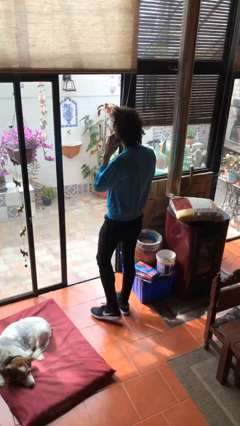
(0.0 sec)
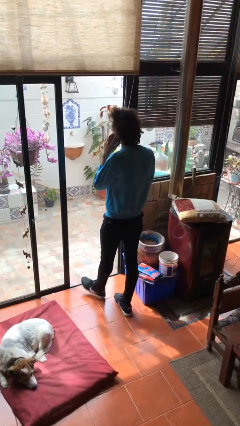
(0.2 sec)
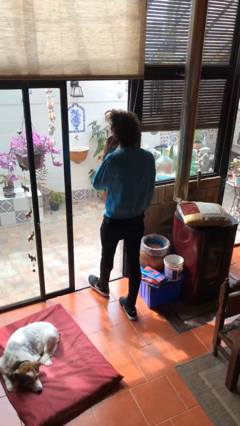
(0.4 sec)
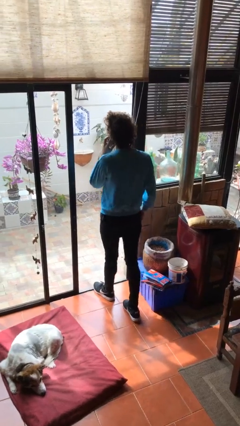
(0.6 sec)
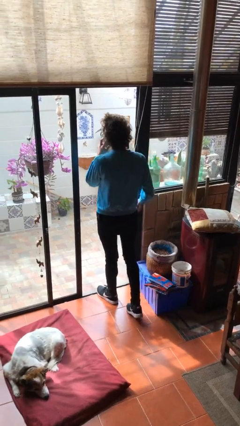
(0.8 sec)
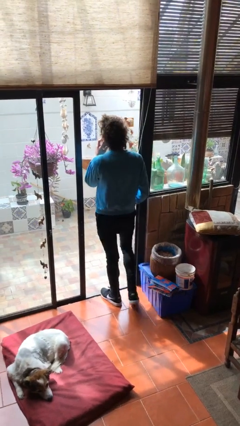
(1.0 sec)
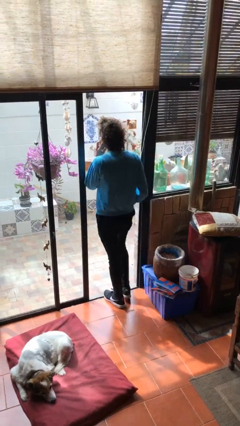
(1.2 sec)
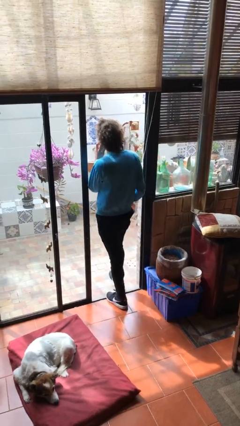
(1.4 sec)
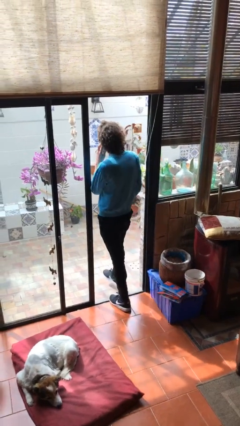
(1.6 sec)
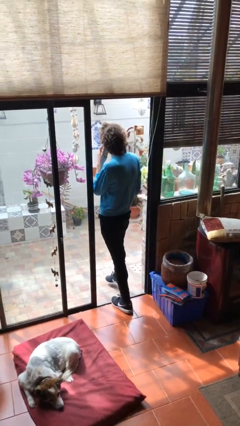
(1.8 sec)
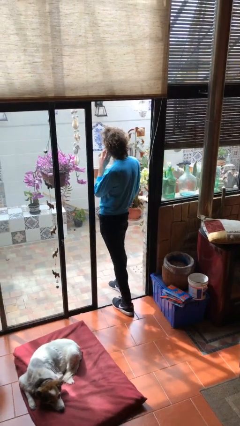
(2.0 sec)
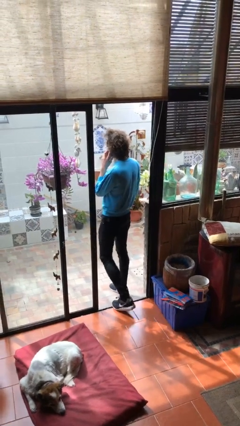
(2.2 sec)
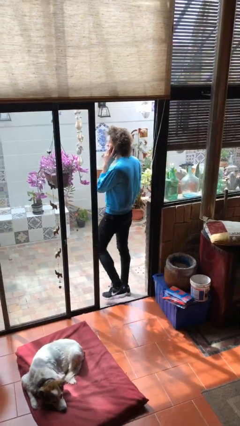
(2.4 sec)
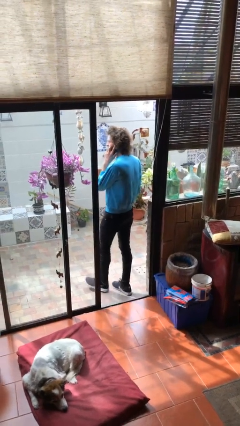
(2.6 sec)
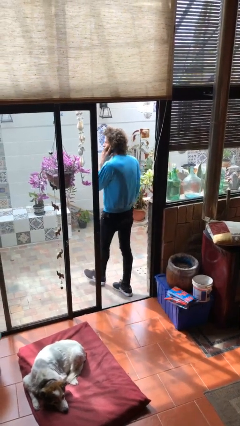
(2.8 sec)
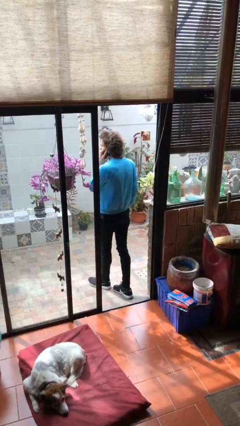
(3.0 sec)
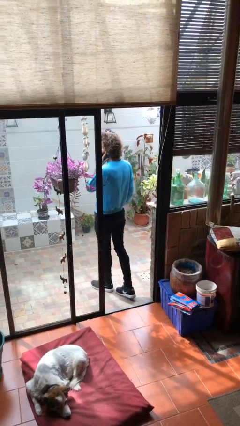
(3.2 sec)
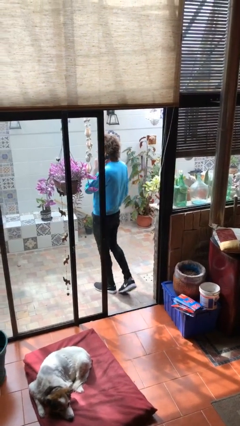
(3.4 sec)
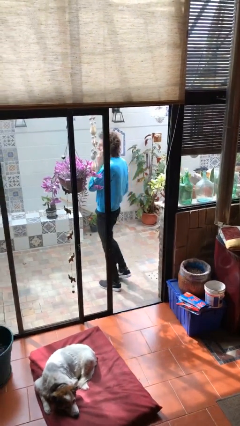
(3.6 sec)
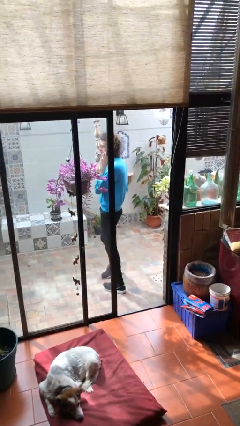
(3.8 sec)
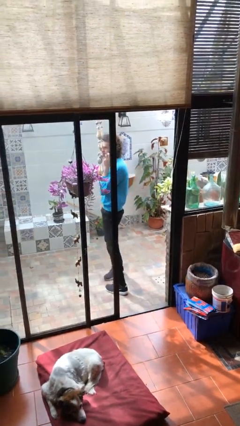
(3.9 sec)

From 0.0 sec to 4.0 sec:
person exits scene through structure

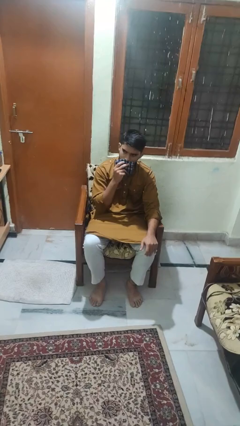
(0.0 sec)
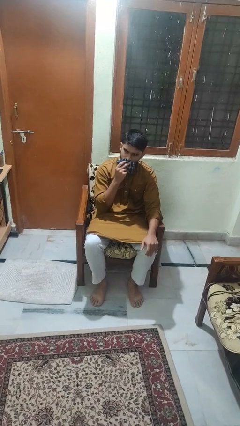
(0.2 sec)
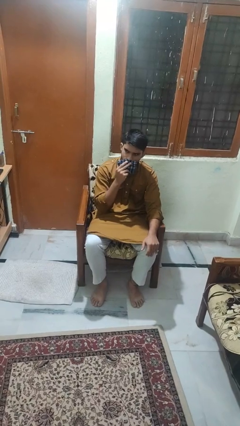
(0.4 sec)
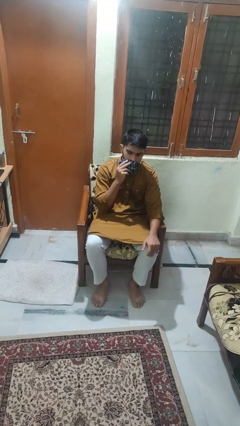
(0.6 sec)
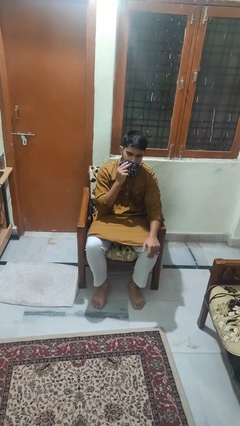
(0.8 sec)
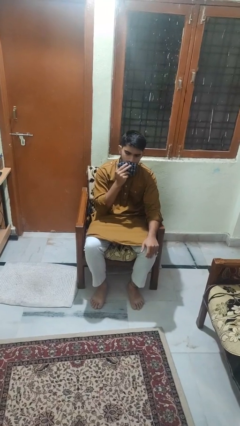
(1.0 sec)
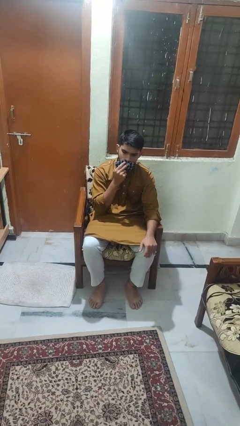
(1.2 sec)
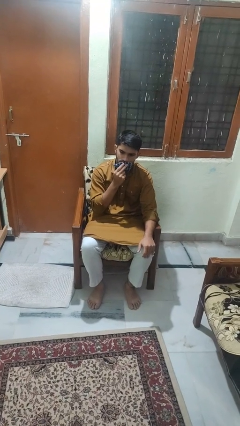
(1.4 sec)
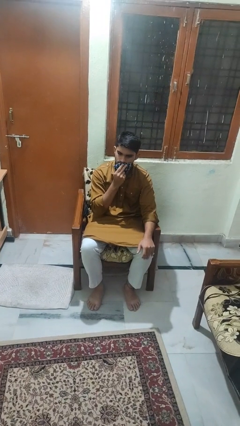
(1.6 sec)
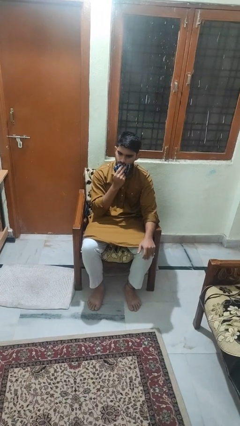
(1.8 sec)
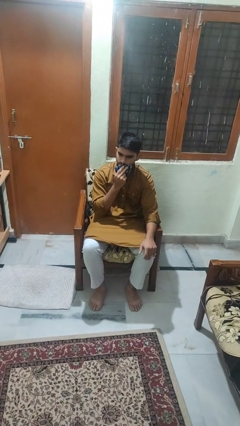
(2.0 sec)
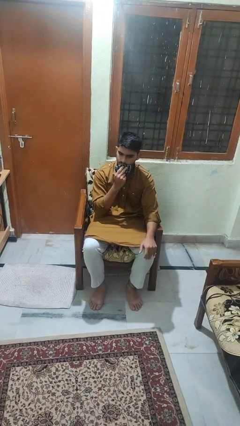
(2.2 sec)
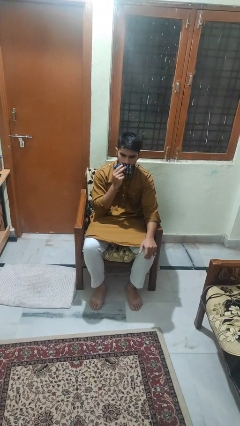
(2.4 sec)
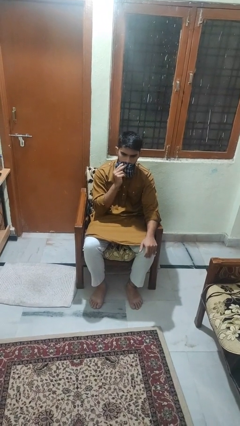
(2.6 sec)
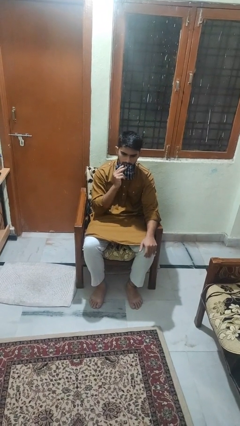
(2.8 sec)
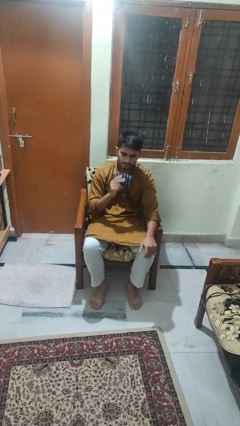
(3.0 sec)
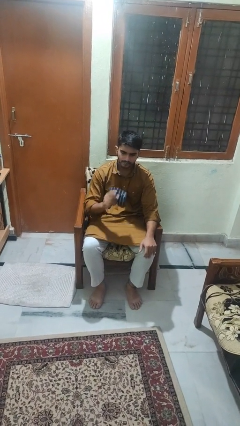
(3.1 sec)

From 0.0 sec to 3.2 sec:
person wipes mouth with napkin

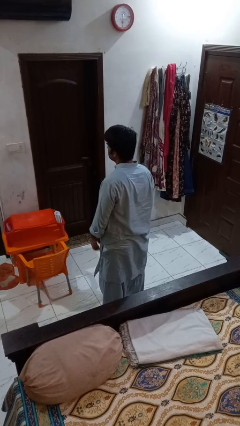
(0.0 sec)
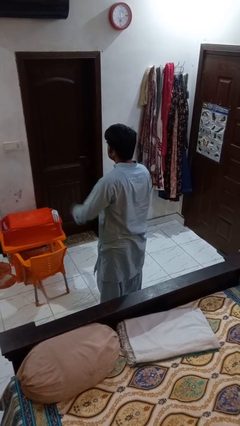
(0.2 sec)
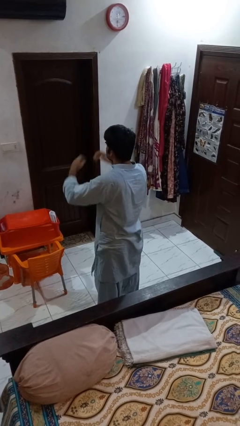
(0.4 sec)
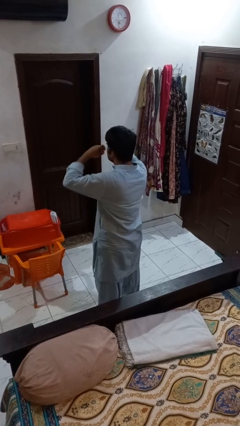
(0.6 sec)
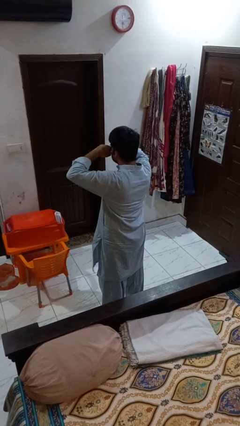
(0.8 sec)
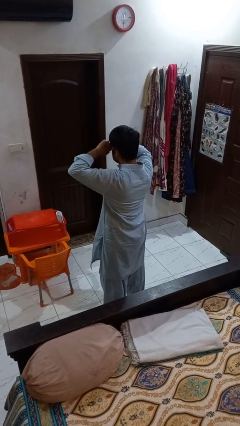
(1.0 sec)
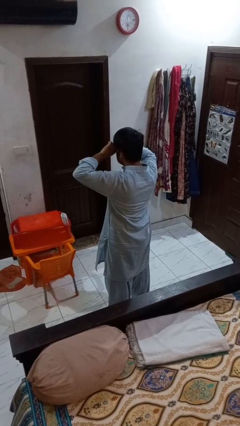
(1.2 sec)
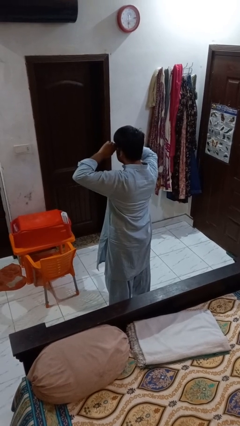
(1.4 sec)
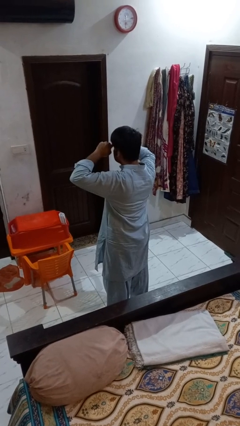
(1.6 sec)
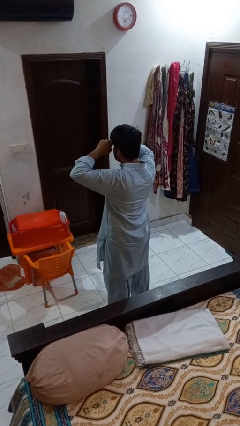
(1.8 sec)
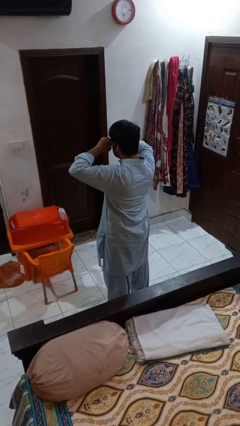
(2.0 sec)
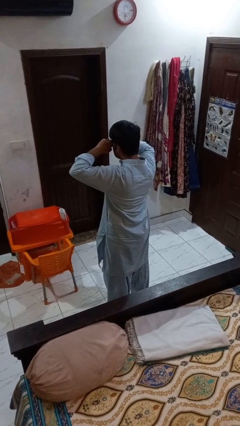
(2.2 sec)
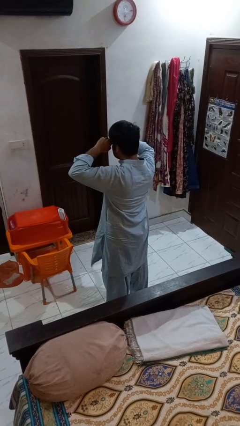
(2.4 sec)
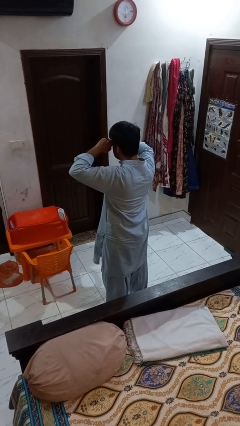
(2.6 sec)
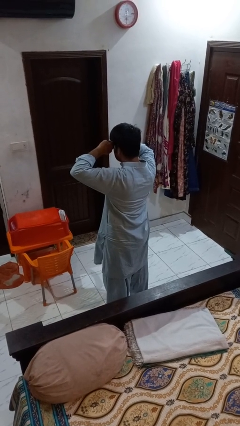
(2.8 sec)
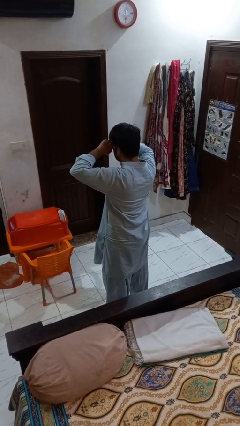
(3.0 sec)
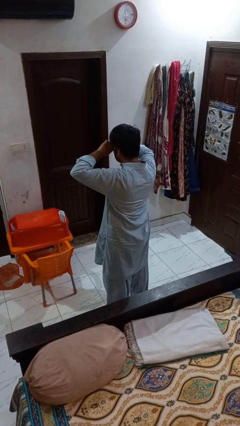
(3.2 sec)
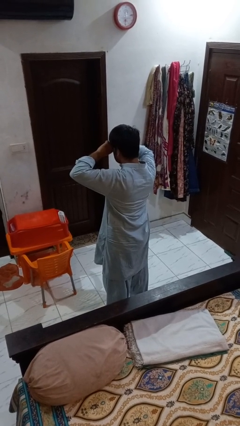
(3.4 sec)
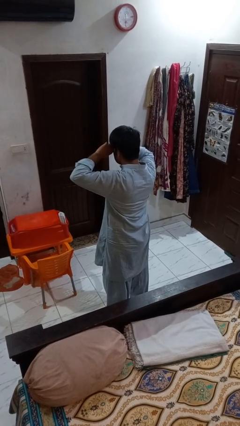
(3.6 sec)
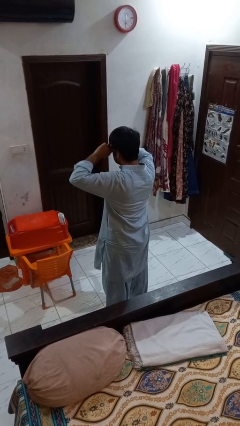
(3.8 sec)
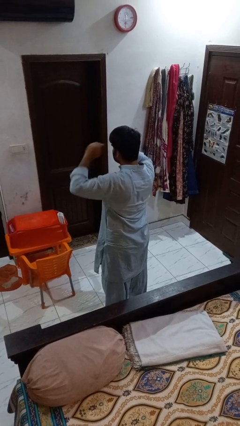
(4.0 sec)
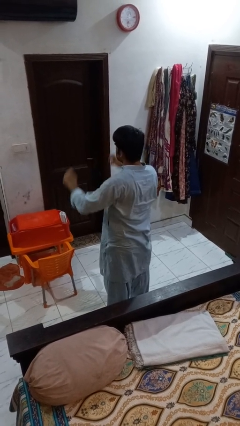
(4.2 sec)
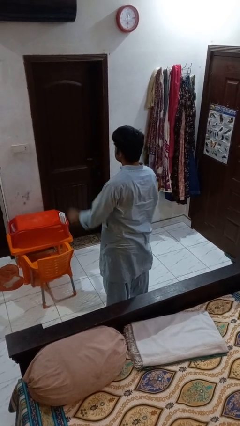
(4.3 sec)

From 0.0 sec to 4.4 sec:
person rubs eyes

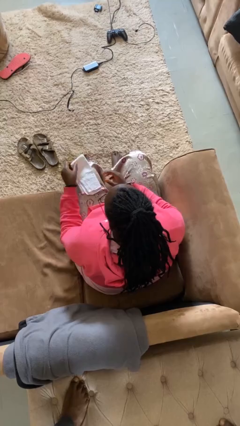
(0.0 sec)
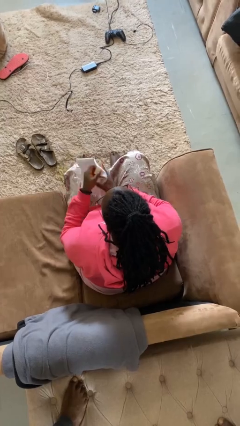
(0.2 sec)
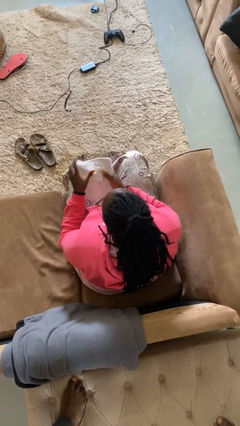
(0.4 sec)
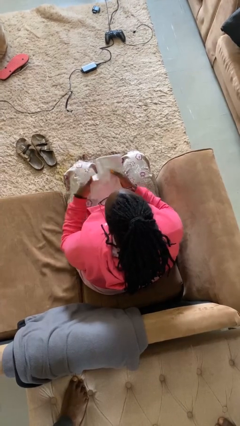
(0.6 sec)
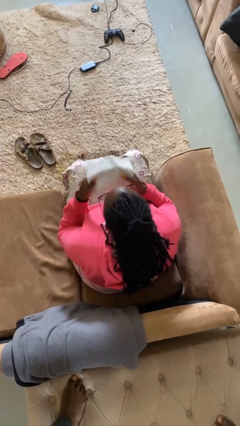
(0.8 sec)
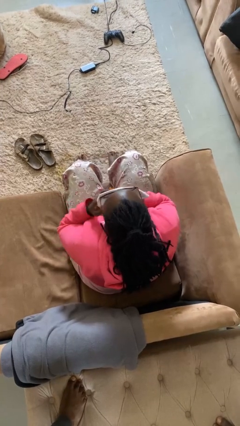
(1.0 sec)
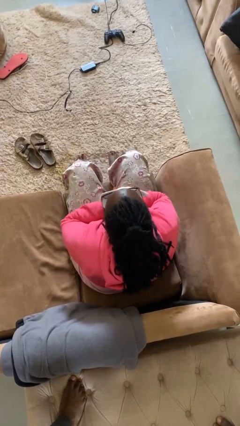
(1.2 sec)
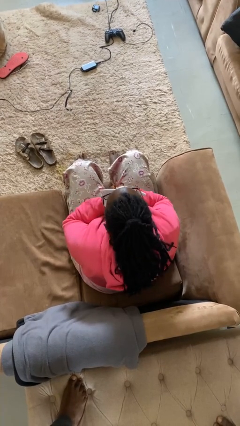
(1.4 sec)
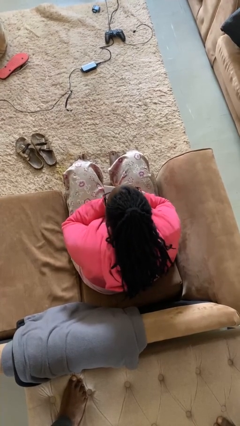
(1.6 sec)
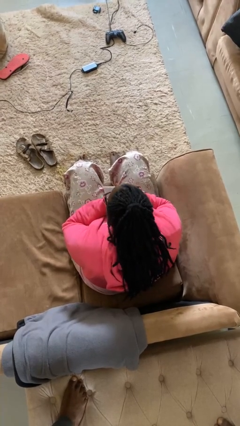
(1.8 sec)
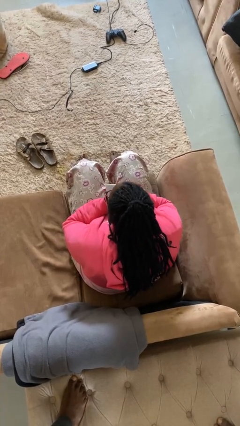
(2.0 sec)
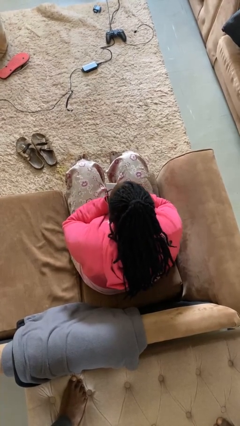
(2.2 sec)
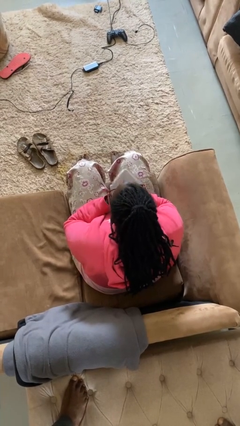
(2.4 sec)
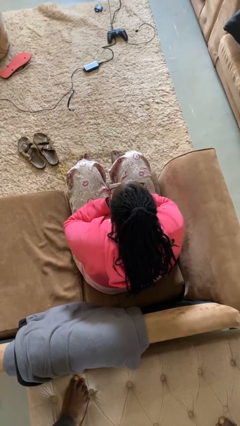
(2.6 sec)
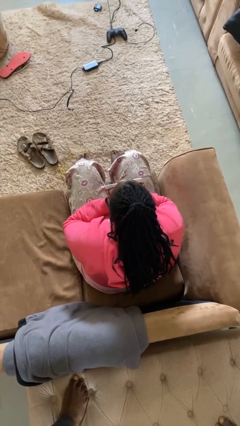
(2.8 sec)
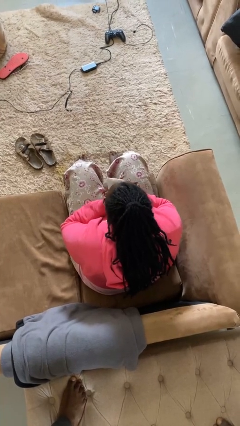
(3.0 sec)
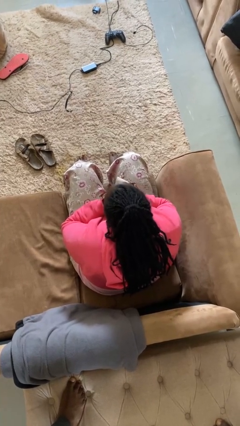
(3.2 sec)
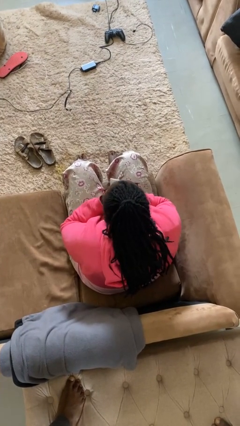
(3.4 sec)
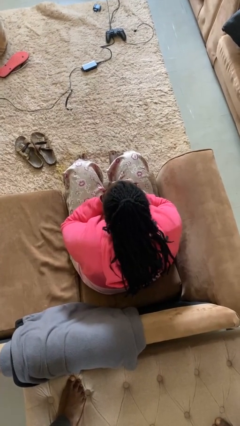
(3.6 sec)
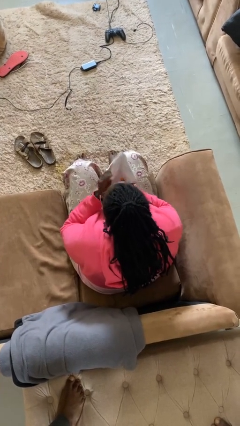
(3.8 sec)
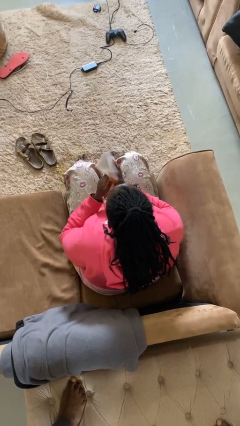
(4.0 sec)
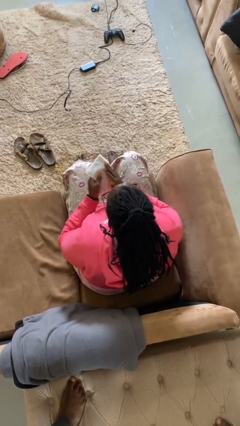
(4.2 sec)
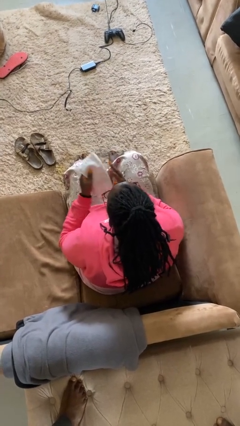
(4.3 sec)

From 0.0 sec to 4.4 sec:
person blows nose

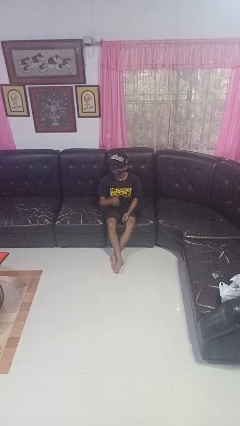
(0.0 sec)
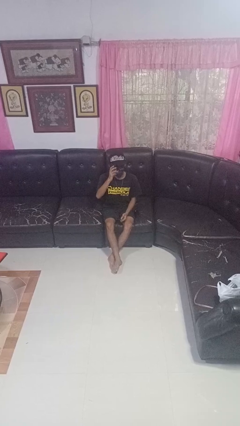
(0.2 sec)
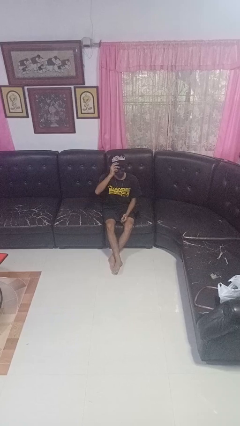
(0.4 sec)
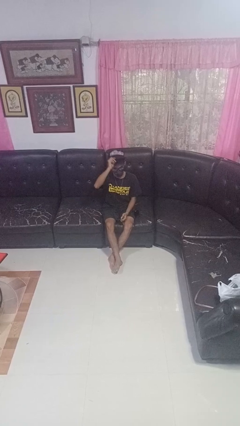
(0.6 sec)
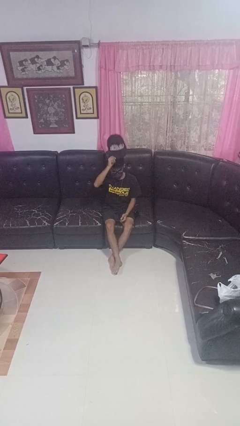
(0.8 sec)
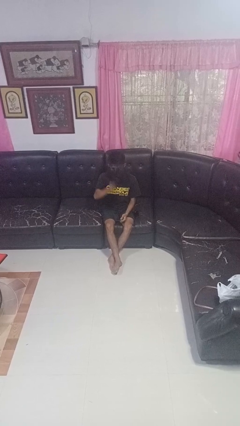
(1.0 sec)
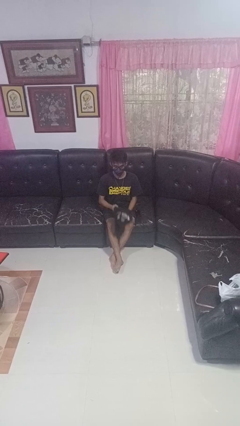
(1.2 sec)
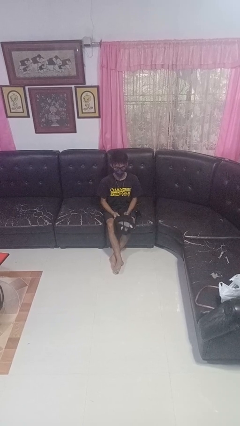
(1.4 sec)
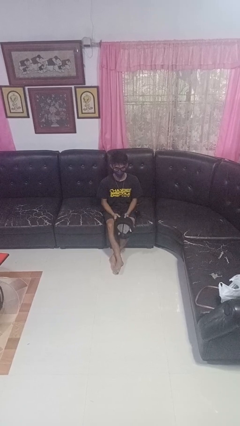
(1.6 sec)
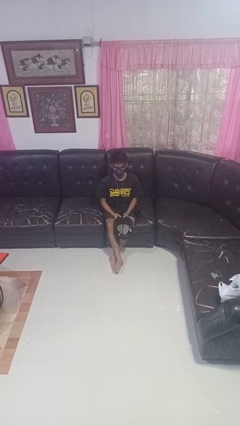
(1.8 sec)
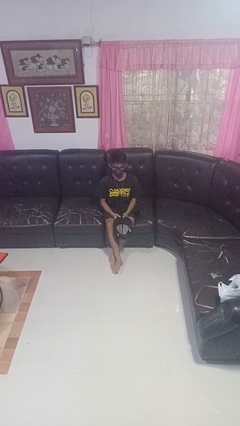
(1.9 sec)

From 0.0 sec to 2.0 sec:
person takes off hat
